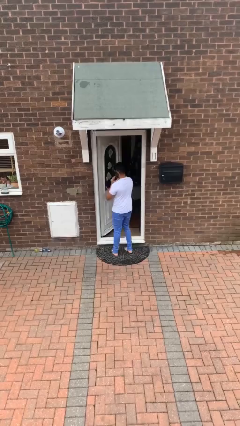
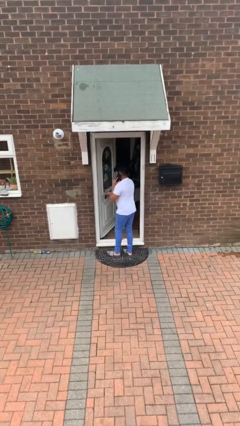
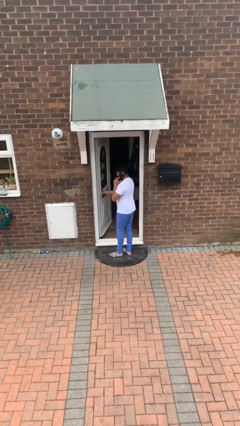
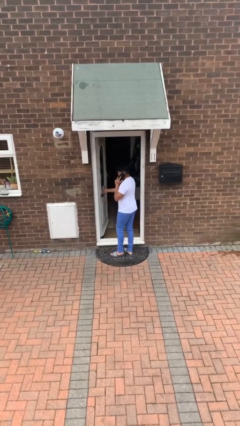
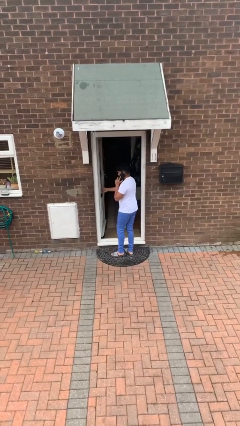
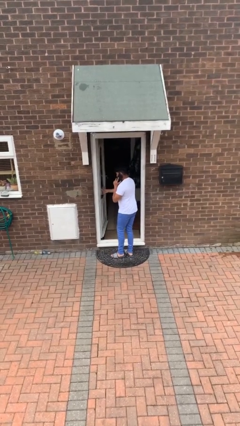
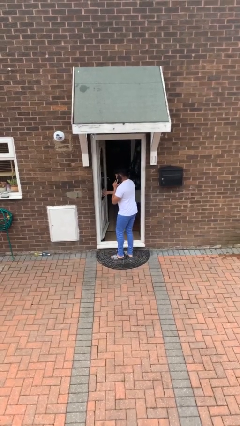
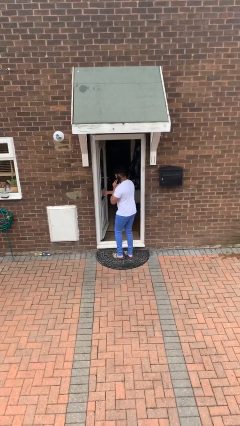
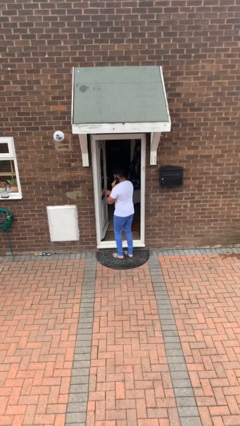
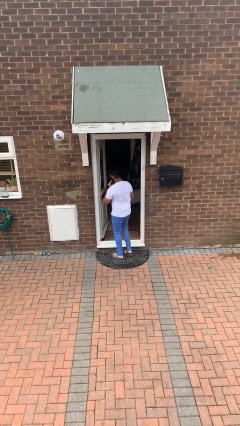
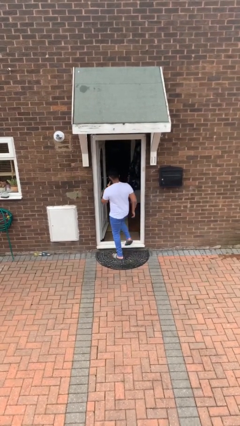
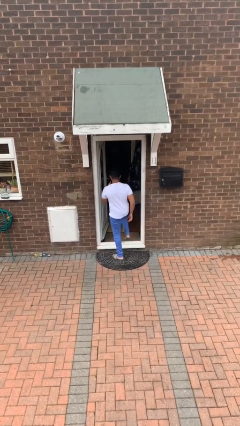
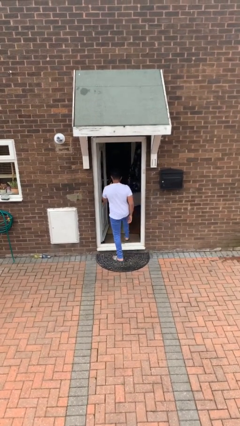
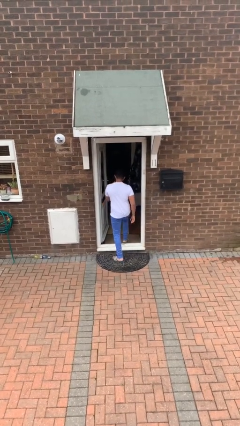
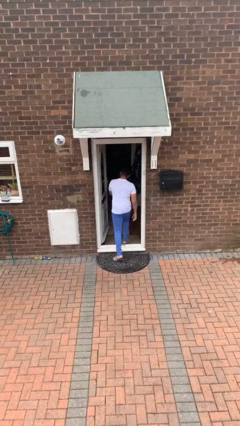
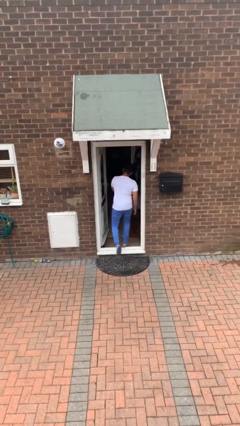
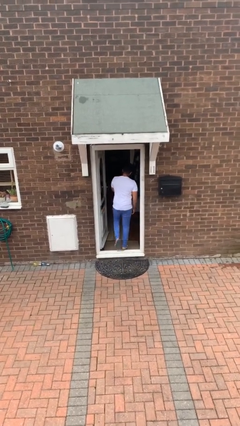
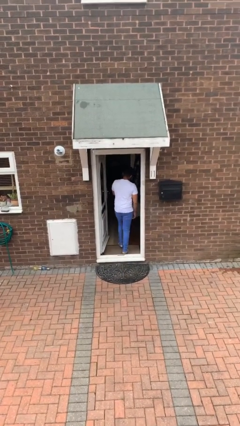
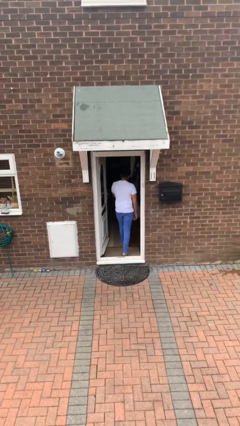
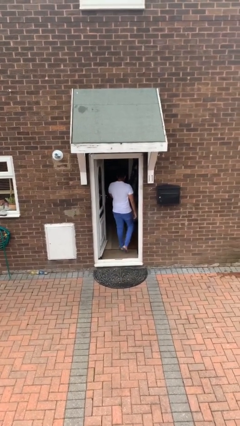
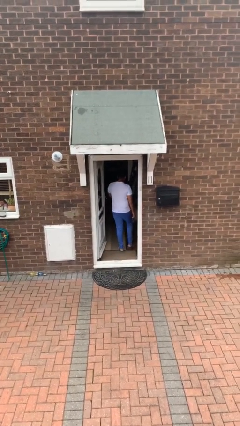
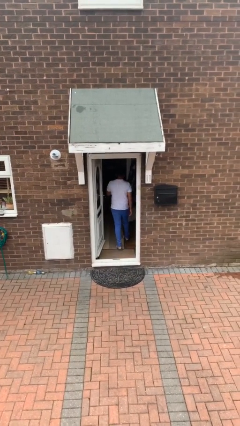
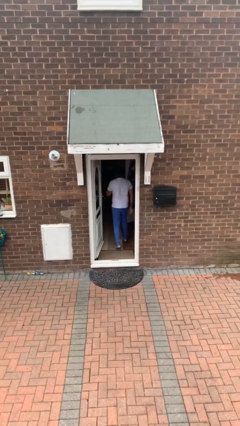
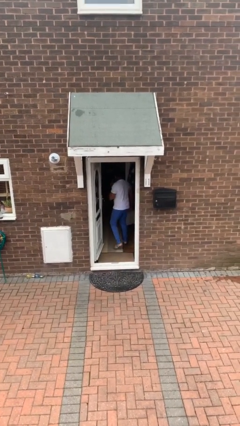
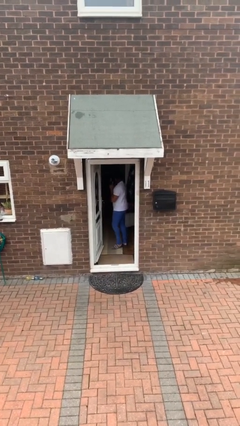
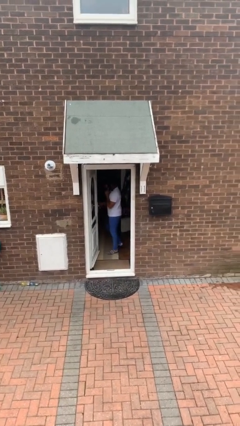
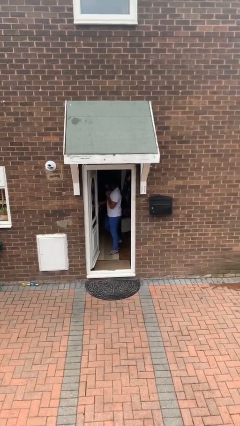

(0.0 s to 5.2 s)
person exits scene through structure

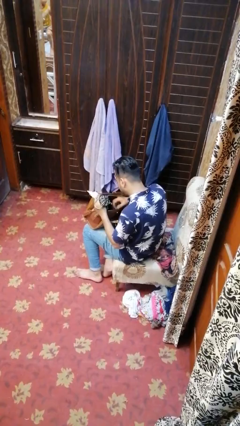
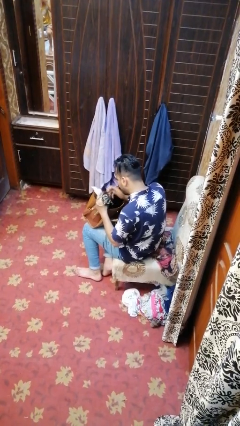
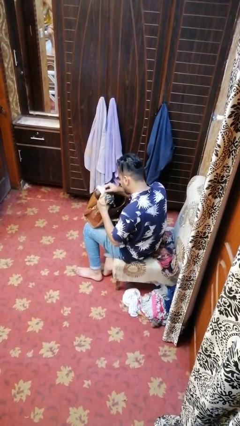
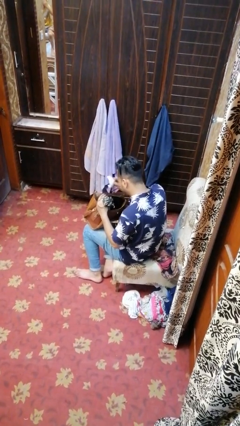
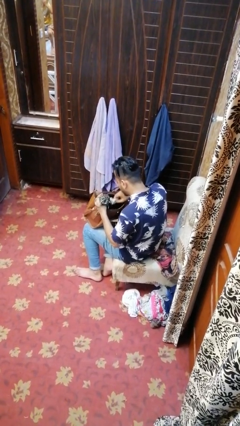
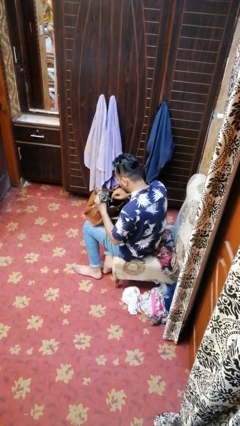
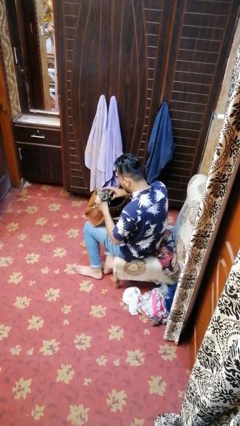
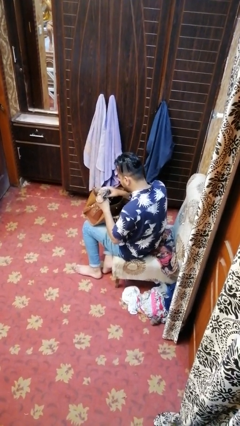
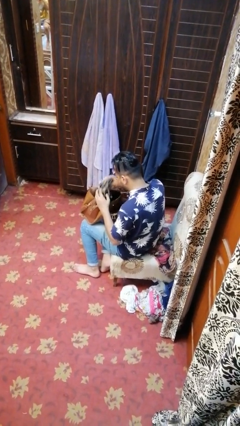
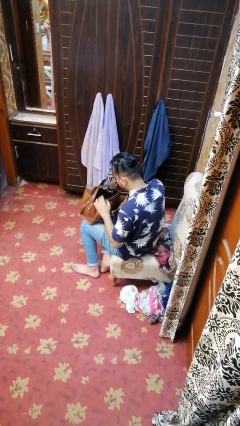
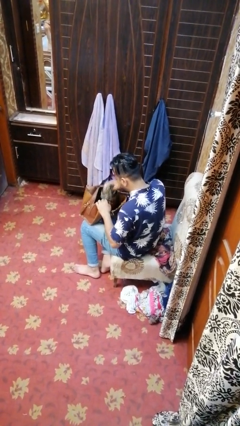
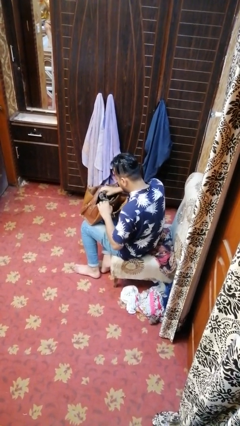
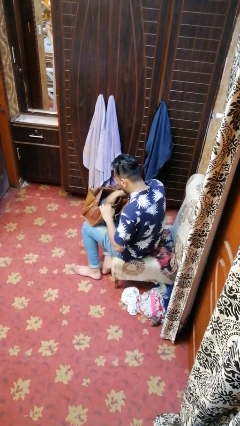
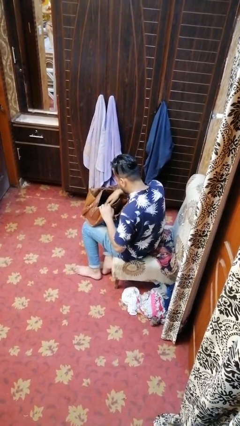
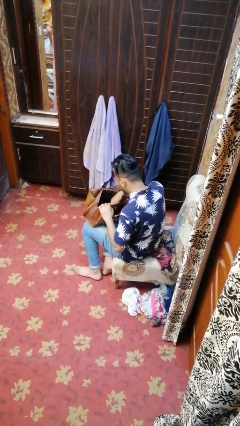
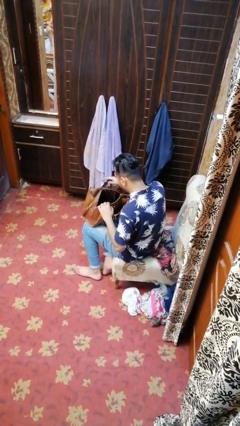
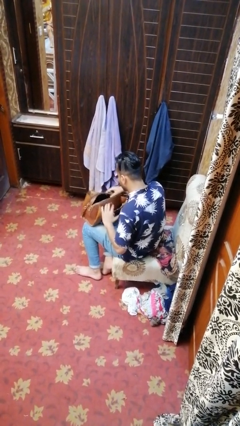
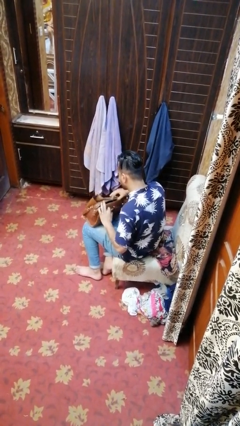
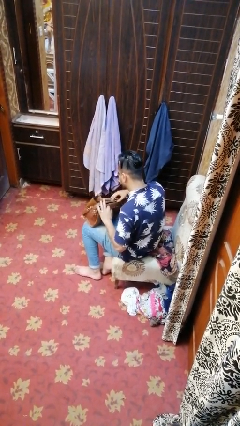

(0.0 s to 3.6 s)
person puts object into purse

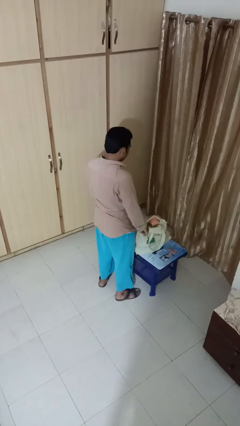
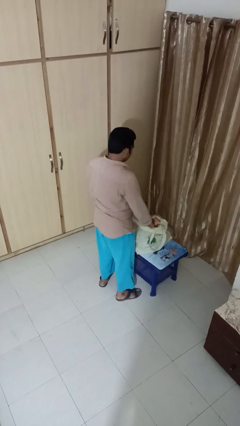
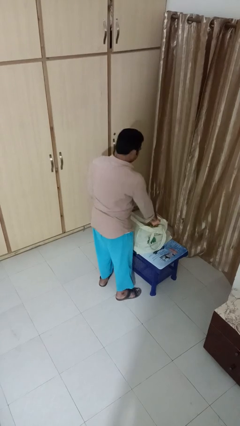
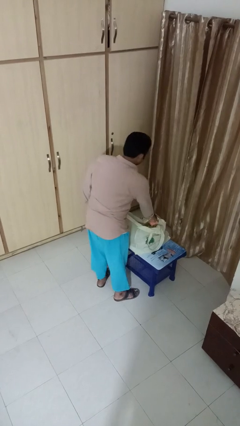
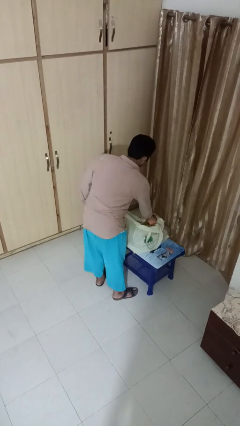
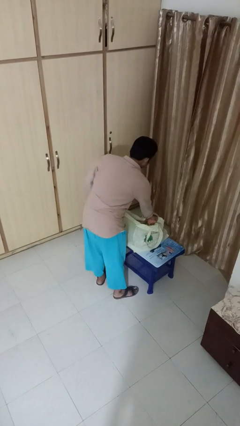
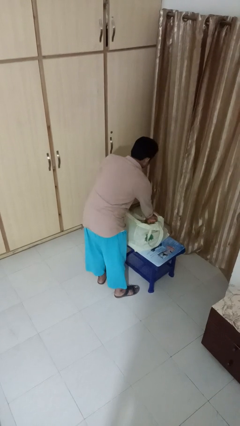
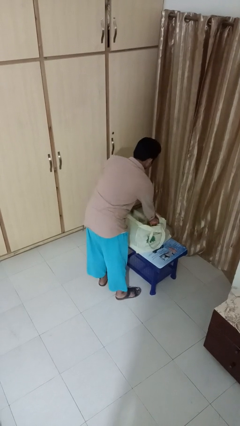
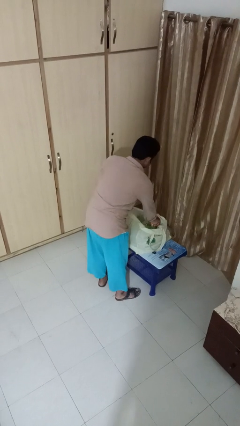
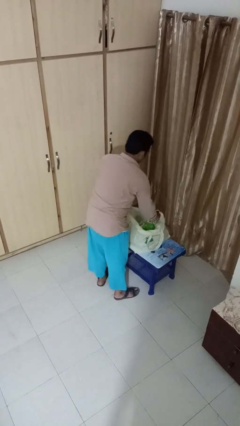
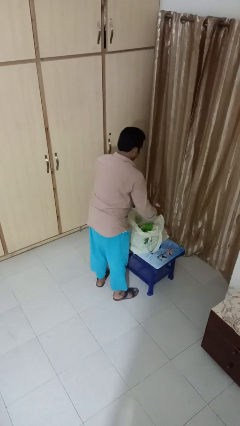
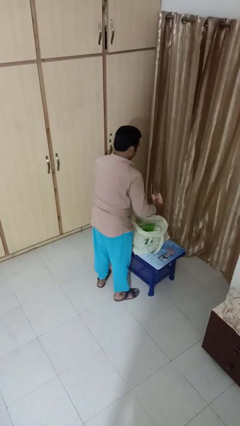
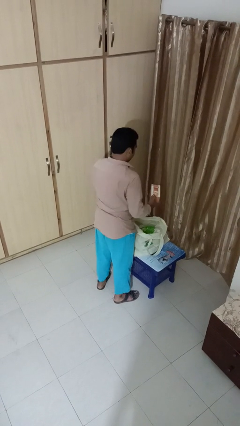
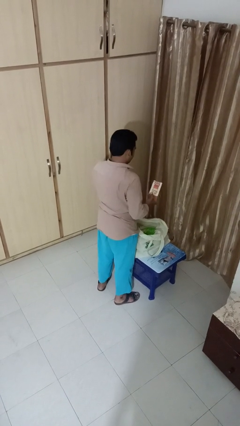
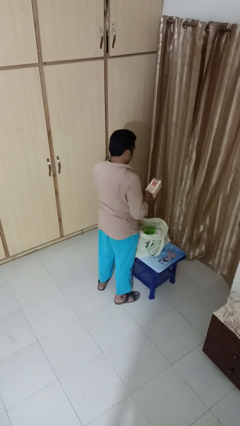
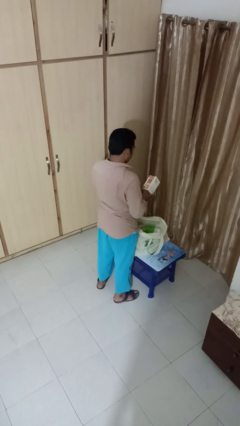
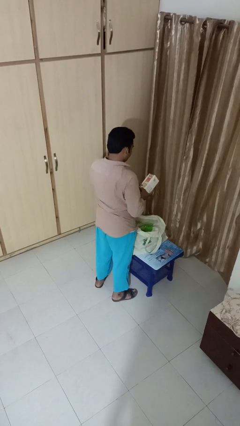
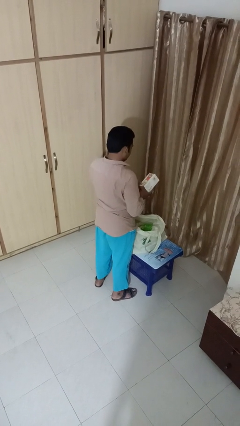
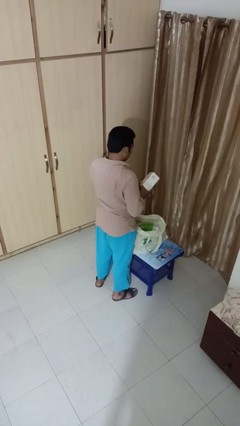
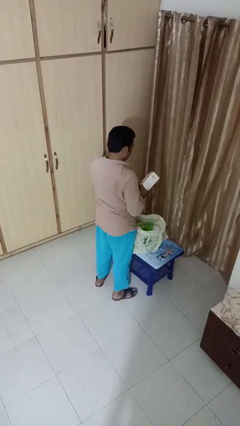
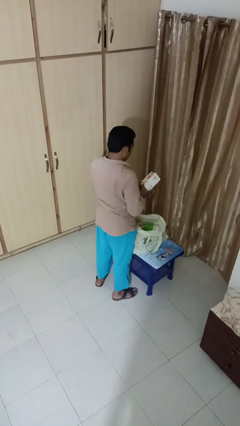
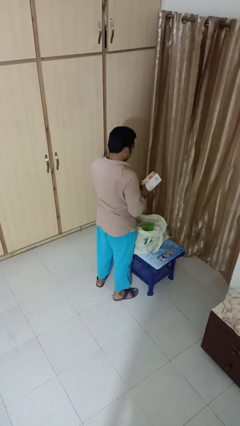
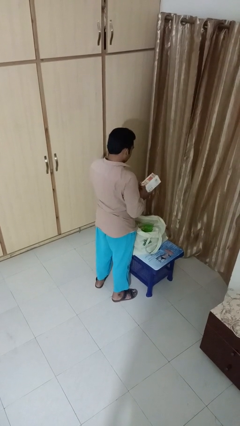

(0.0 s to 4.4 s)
person takes object from bag

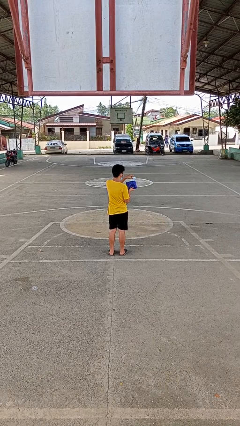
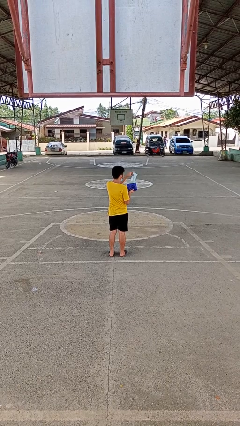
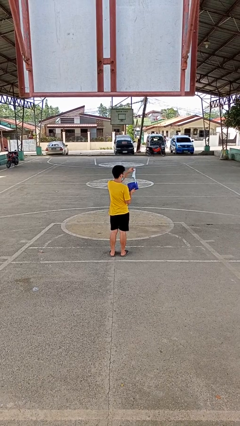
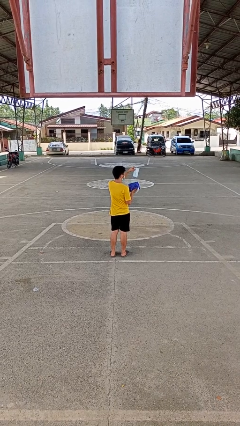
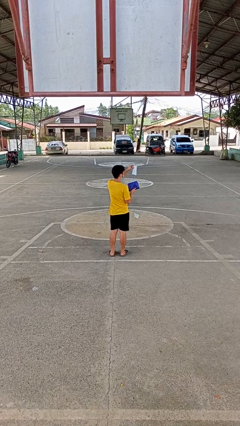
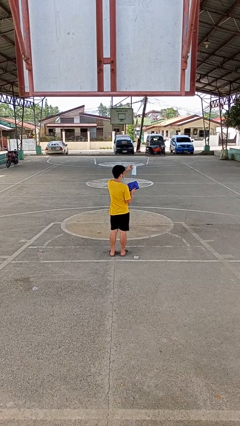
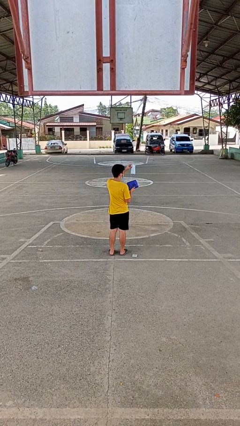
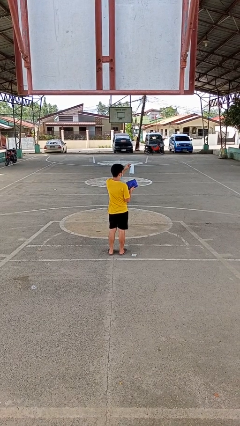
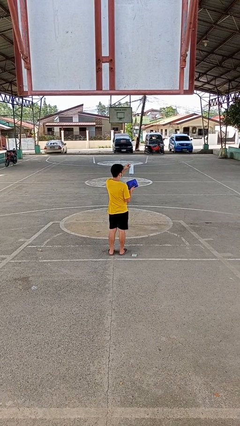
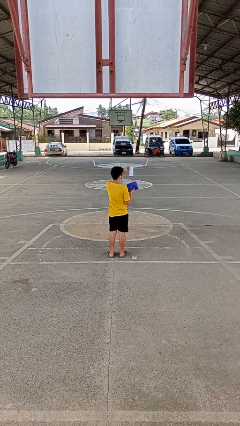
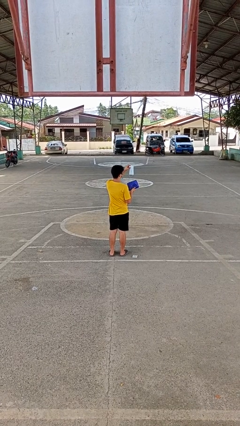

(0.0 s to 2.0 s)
person takes object from purse

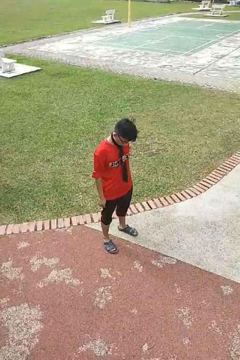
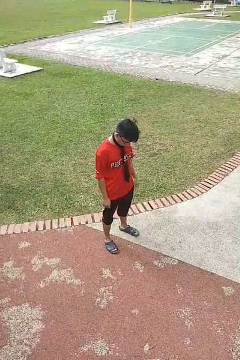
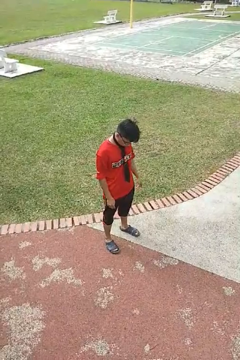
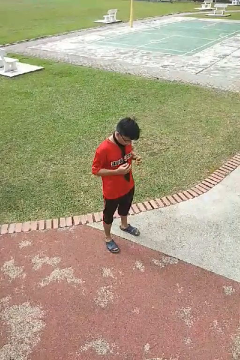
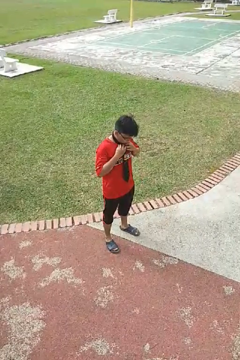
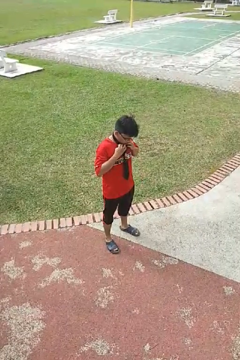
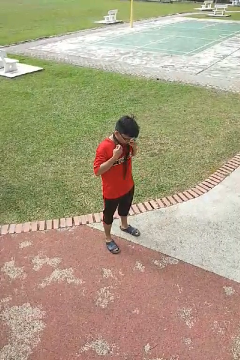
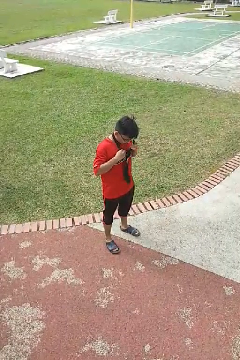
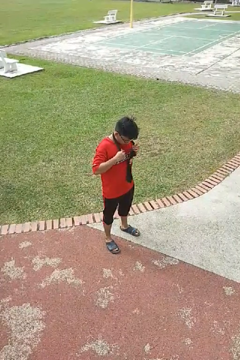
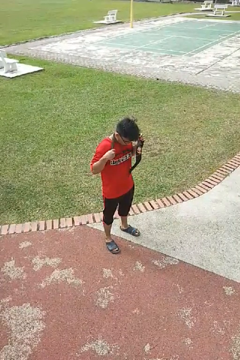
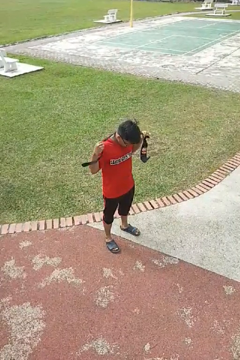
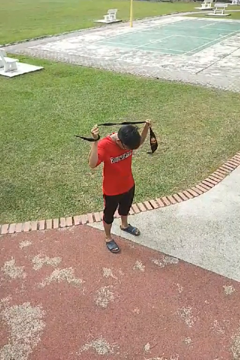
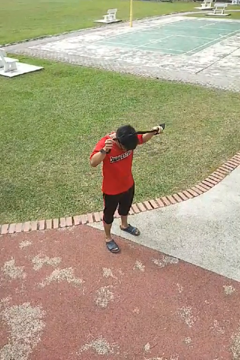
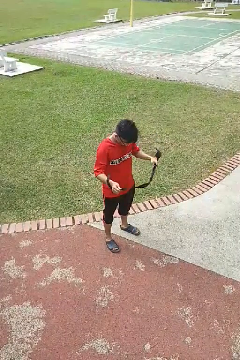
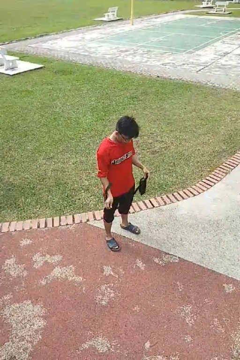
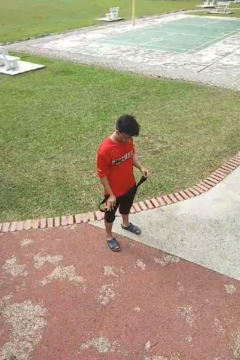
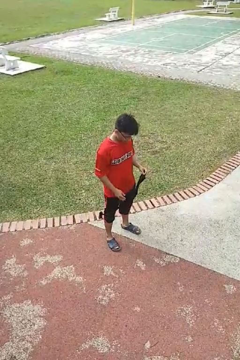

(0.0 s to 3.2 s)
person takes off necktie
